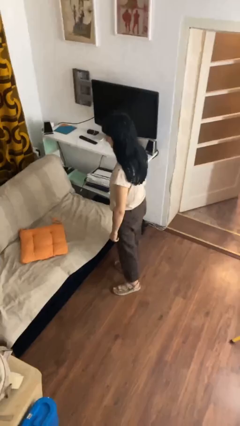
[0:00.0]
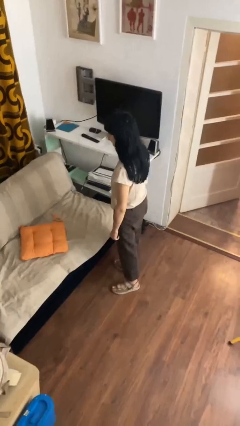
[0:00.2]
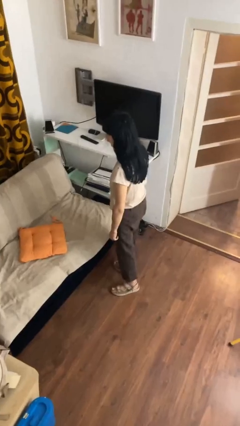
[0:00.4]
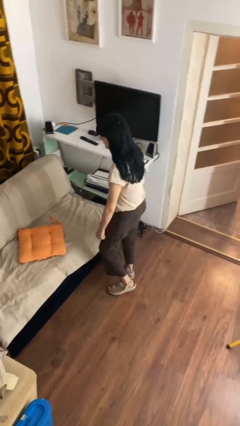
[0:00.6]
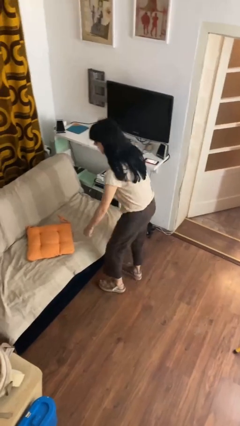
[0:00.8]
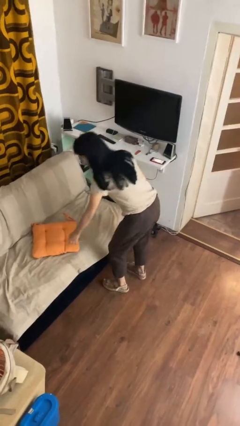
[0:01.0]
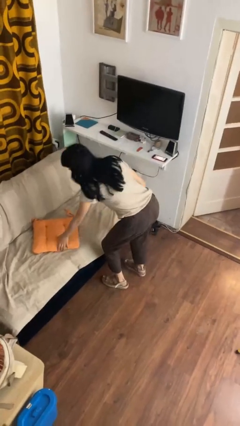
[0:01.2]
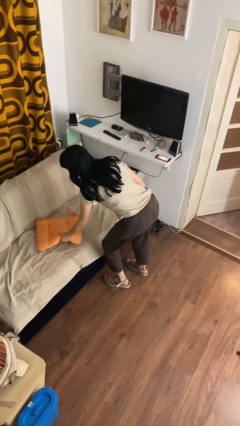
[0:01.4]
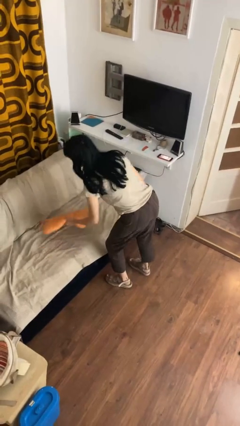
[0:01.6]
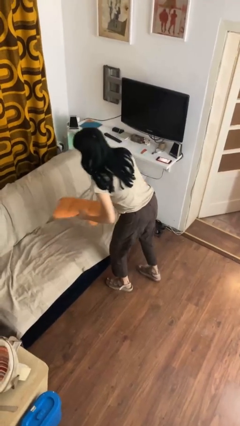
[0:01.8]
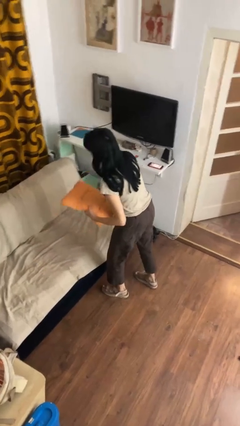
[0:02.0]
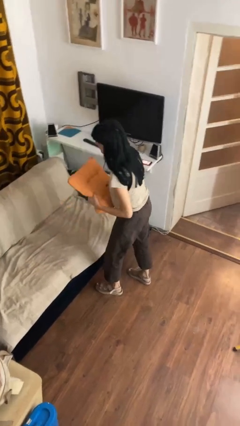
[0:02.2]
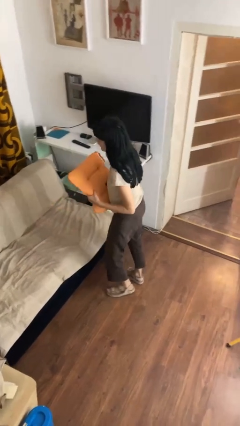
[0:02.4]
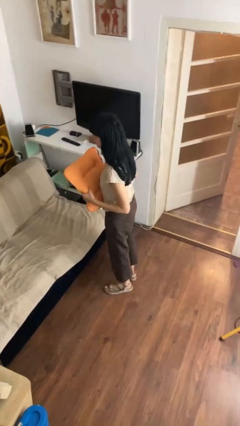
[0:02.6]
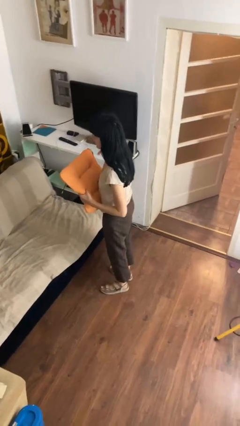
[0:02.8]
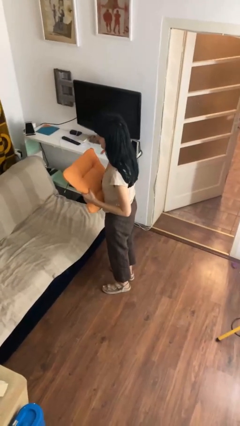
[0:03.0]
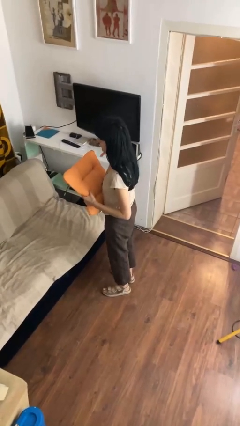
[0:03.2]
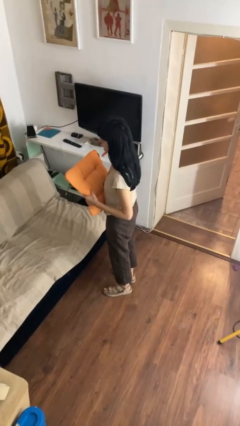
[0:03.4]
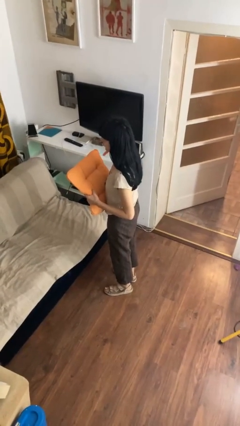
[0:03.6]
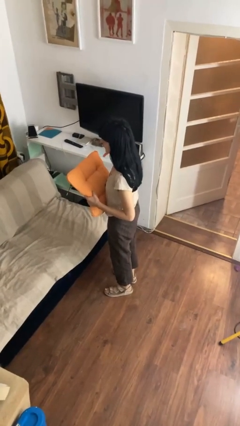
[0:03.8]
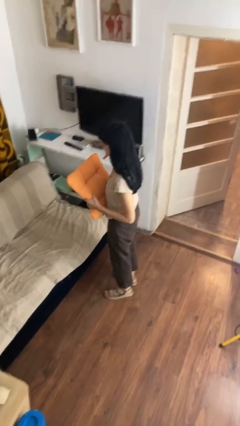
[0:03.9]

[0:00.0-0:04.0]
person picks up object from couch

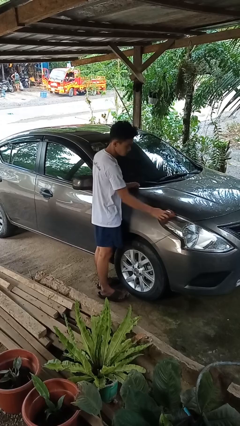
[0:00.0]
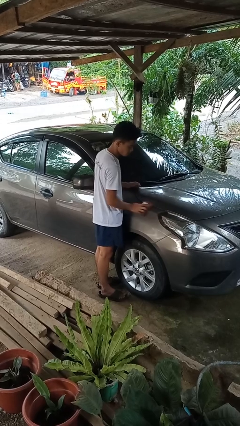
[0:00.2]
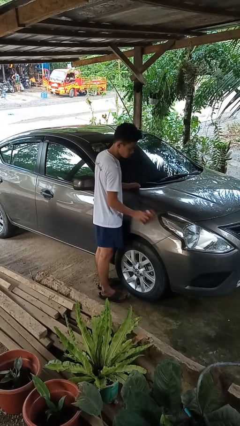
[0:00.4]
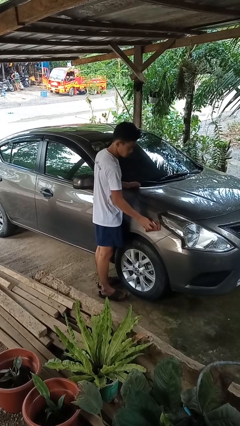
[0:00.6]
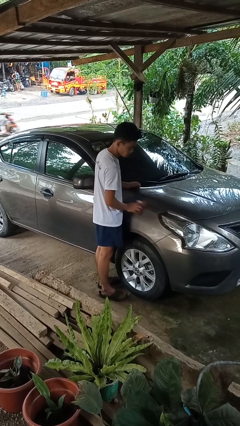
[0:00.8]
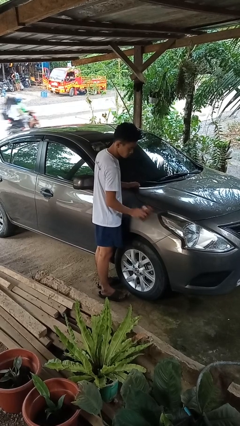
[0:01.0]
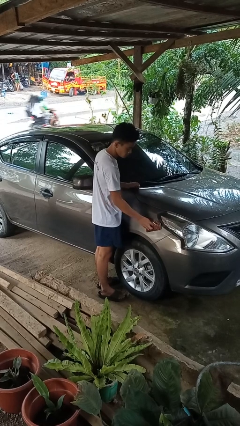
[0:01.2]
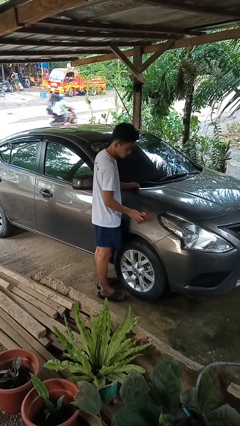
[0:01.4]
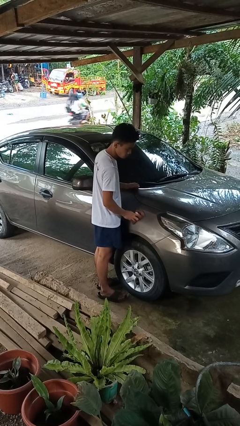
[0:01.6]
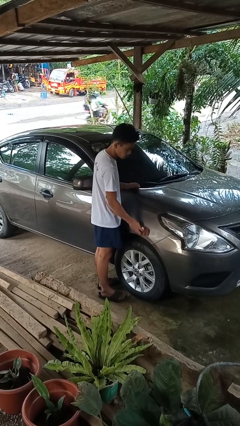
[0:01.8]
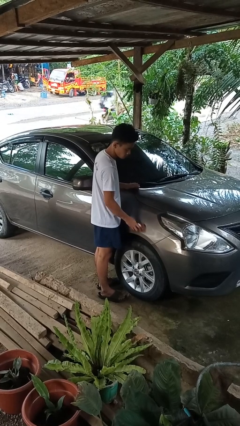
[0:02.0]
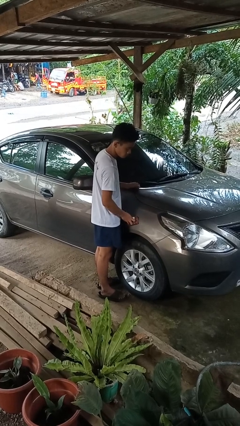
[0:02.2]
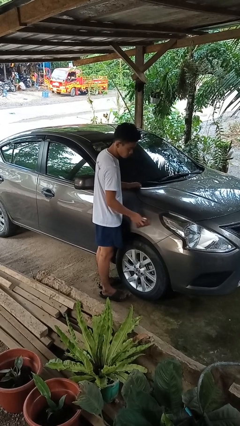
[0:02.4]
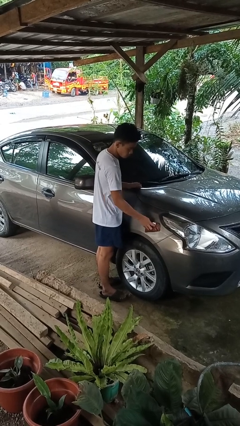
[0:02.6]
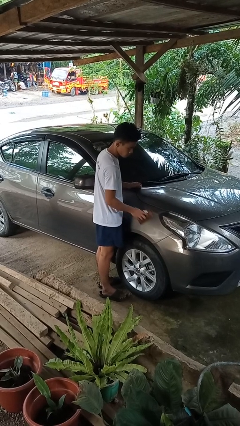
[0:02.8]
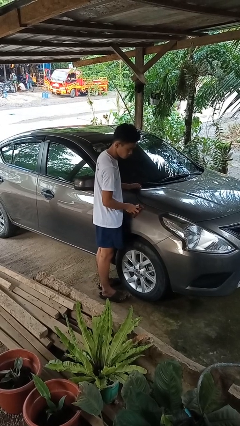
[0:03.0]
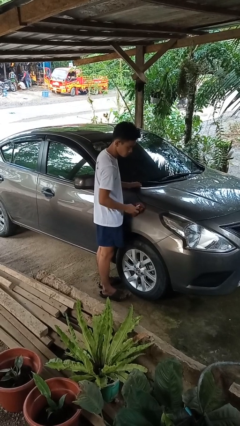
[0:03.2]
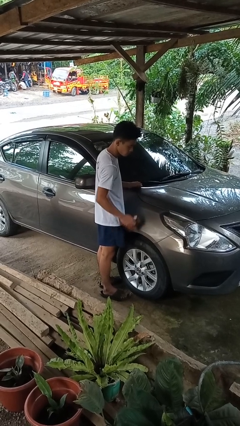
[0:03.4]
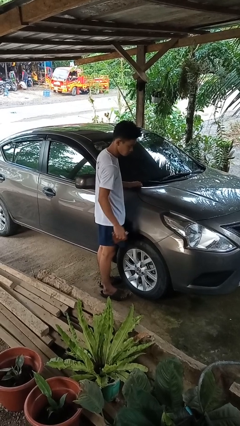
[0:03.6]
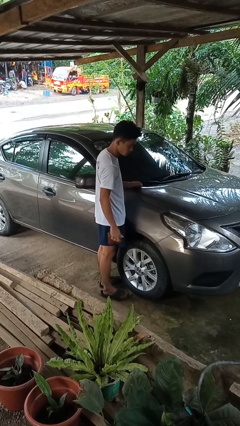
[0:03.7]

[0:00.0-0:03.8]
person polishes car with rag

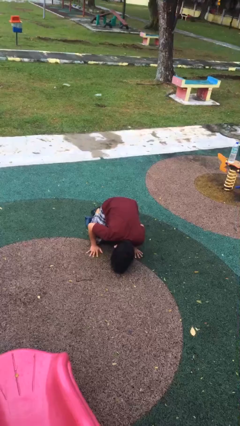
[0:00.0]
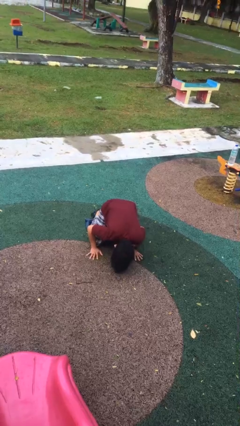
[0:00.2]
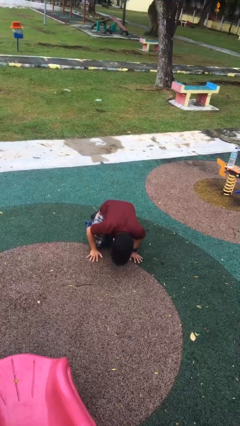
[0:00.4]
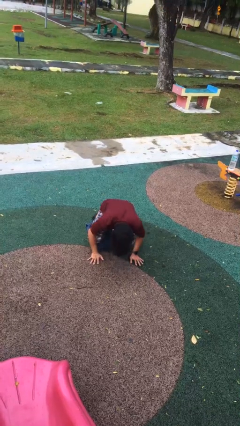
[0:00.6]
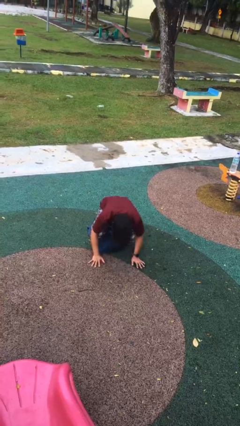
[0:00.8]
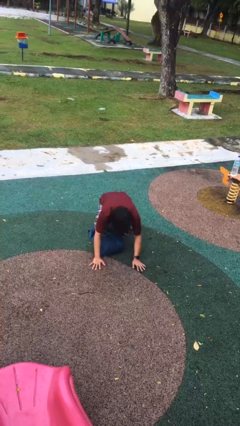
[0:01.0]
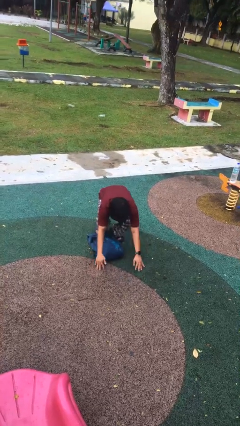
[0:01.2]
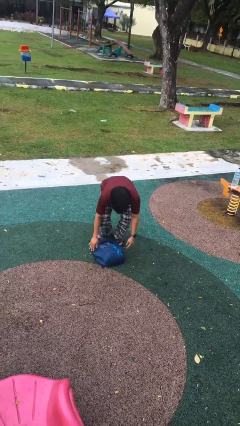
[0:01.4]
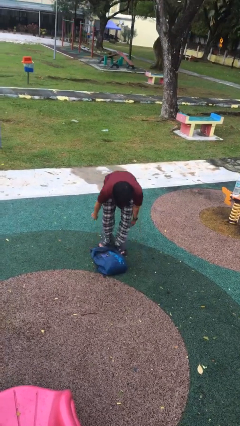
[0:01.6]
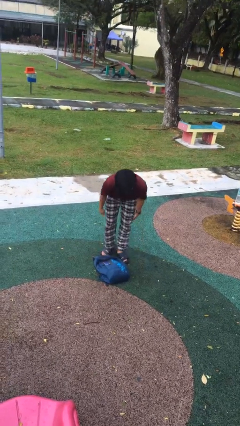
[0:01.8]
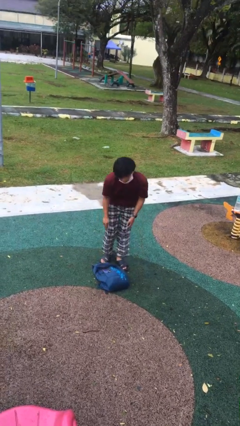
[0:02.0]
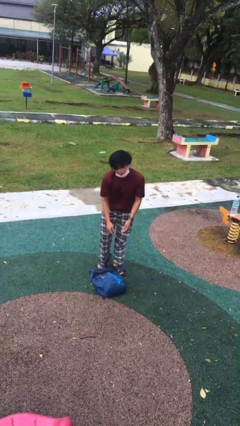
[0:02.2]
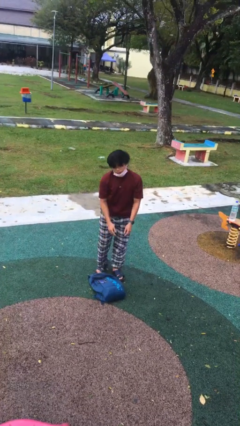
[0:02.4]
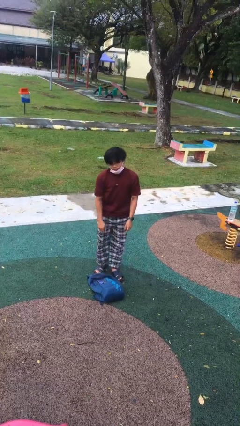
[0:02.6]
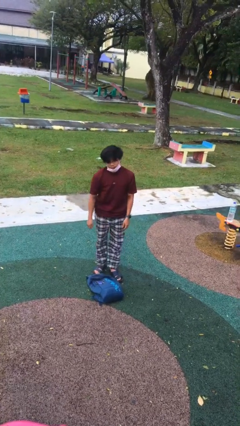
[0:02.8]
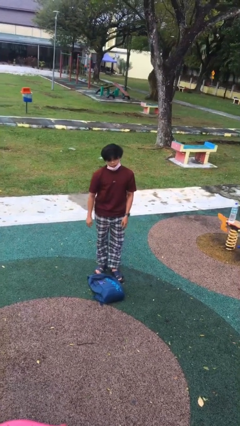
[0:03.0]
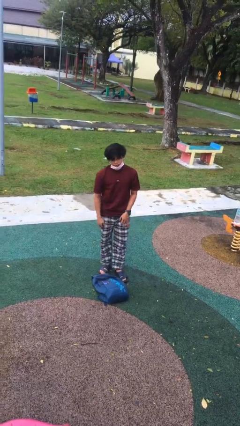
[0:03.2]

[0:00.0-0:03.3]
person stands up from floor

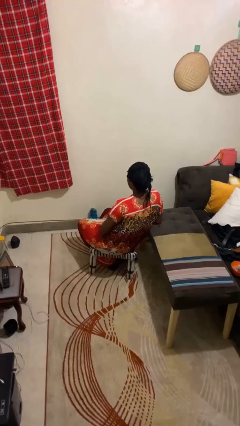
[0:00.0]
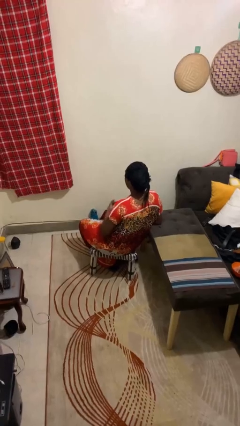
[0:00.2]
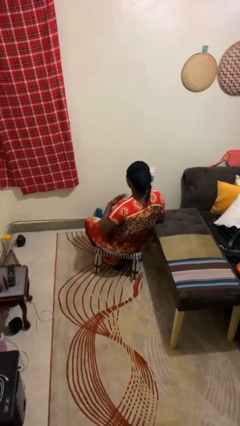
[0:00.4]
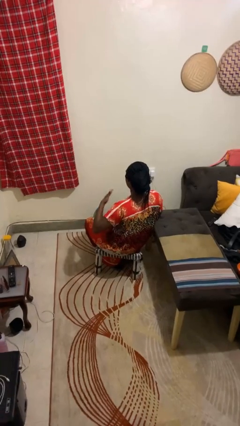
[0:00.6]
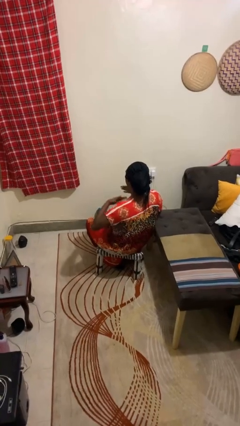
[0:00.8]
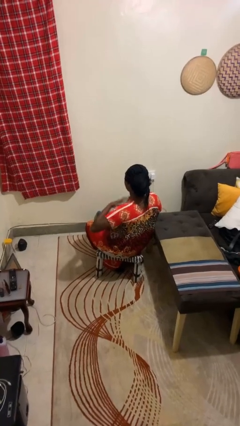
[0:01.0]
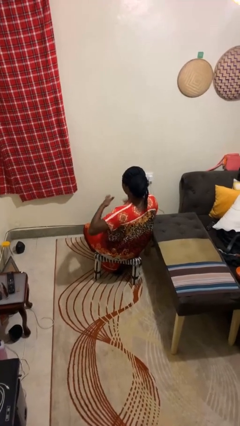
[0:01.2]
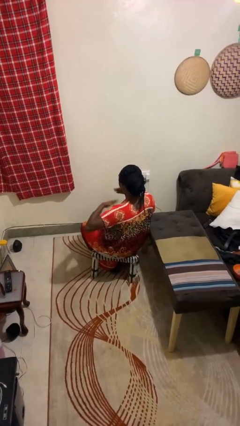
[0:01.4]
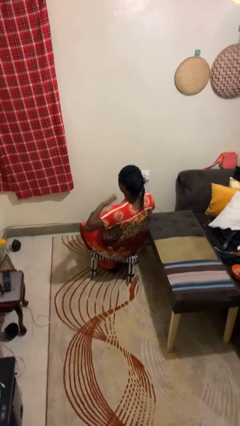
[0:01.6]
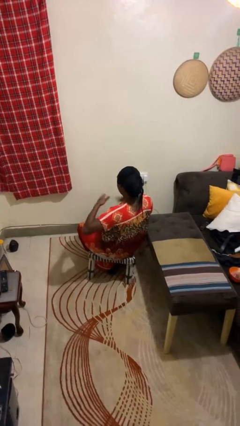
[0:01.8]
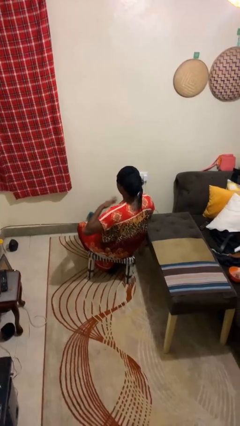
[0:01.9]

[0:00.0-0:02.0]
person drums on chest

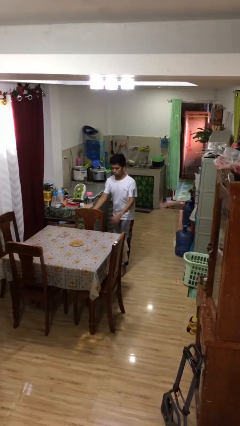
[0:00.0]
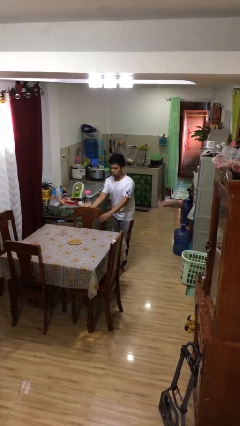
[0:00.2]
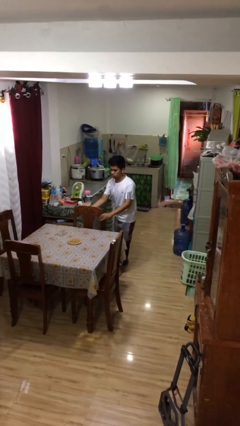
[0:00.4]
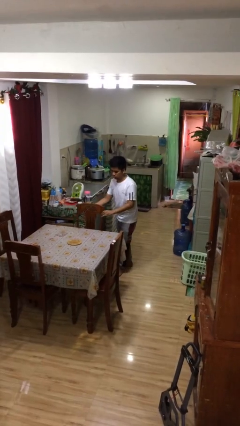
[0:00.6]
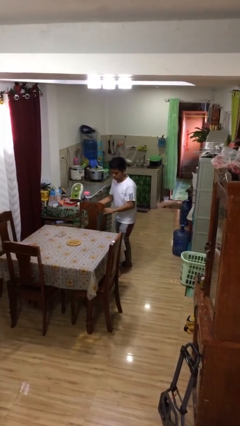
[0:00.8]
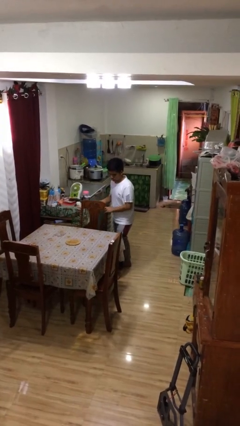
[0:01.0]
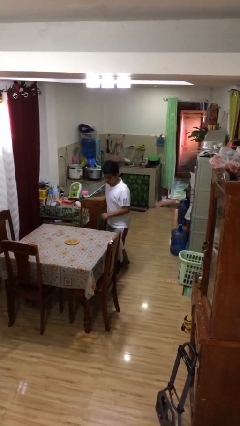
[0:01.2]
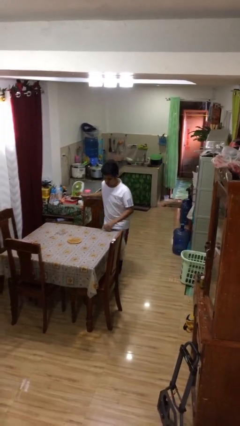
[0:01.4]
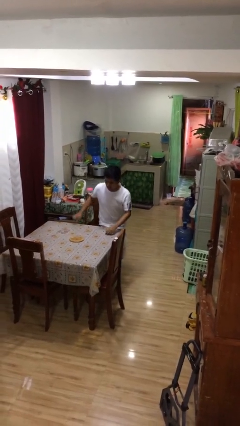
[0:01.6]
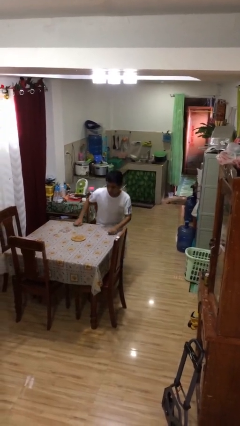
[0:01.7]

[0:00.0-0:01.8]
person stands up

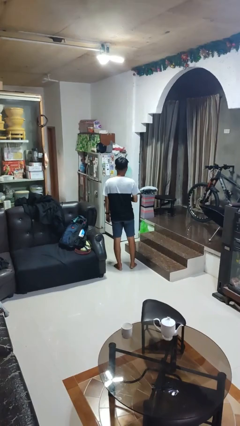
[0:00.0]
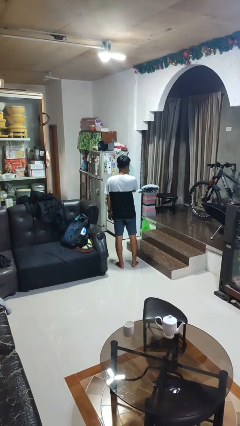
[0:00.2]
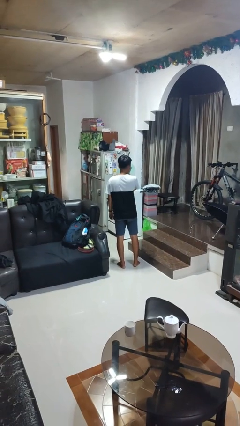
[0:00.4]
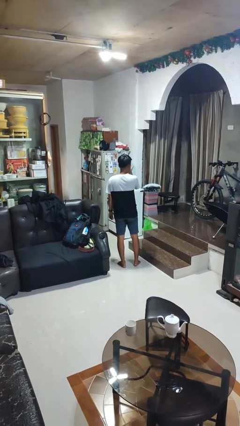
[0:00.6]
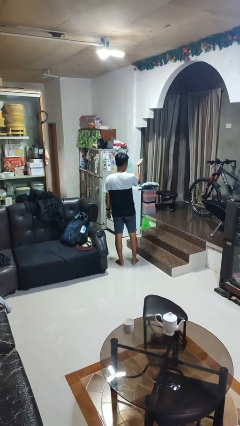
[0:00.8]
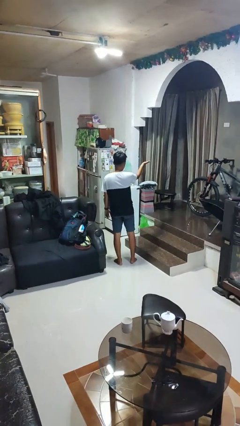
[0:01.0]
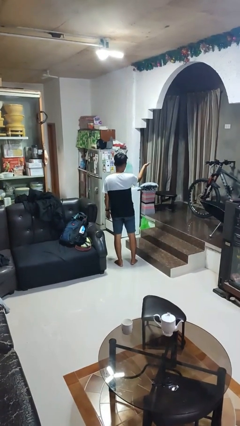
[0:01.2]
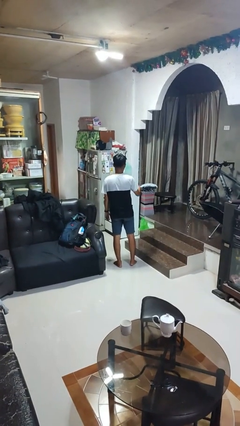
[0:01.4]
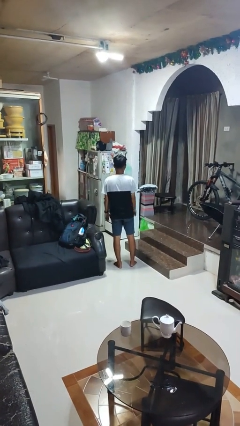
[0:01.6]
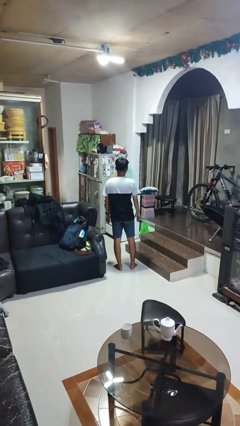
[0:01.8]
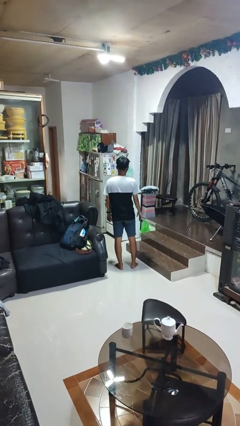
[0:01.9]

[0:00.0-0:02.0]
person gestures blow kiss
